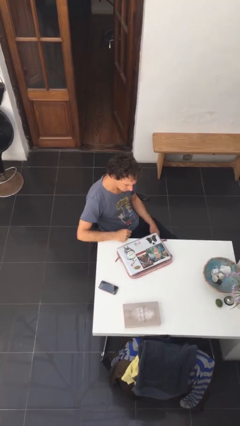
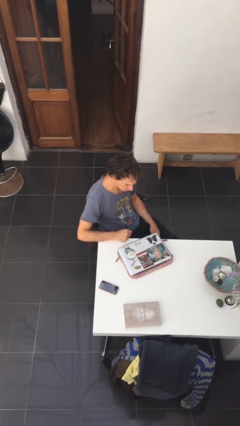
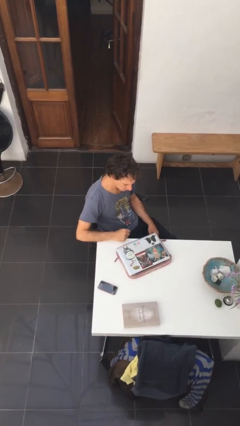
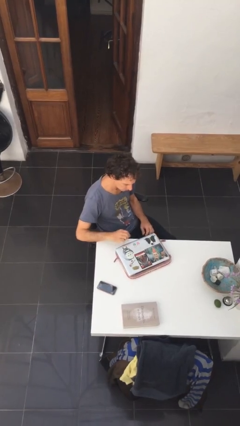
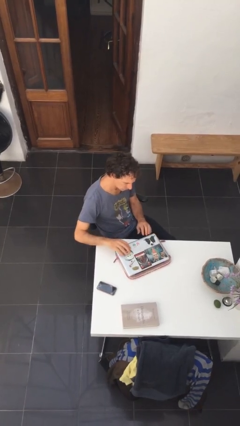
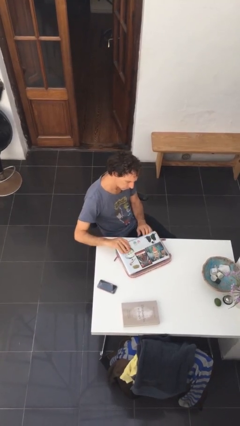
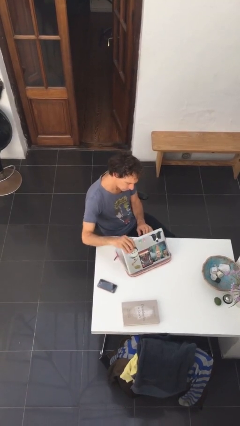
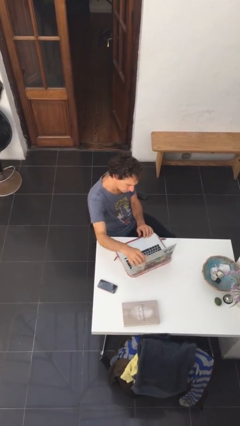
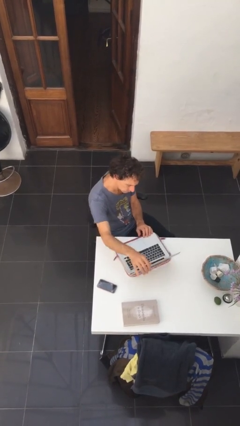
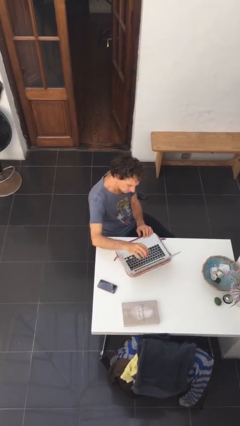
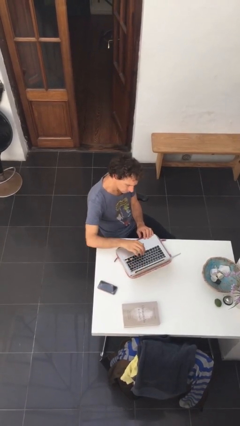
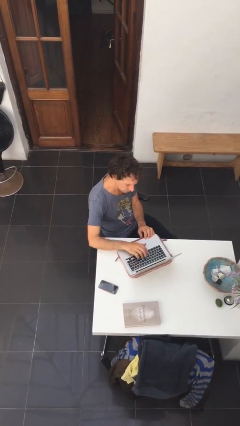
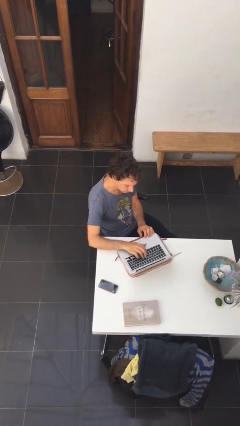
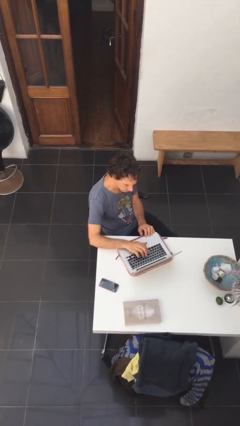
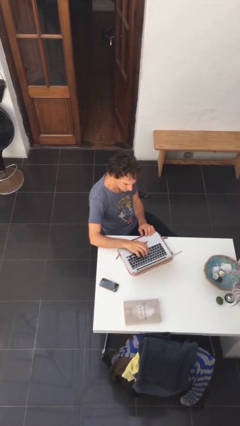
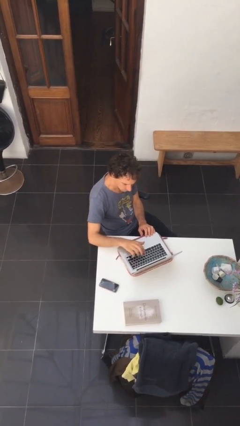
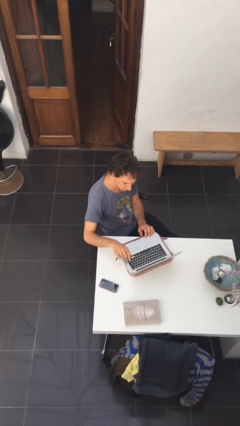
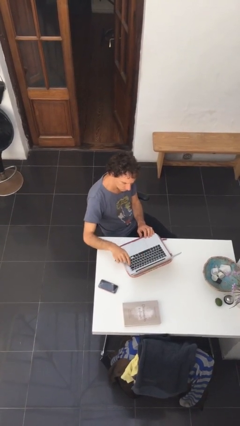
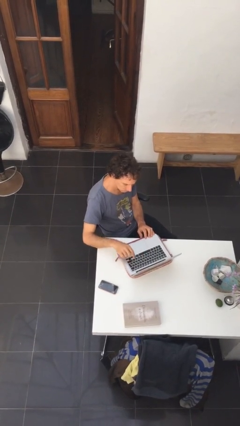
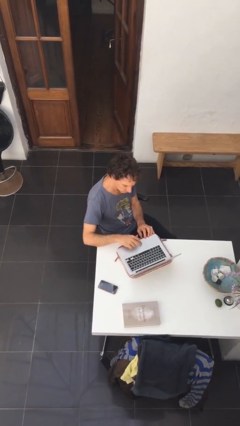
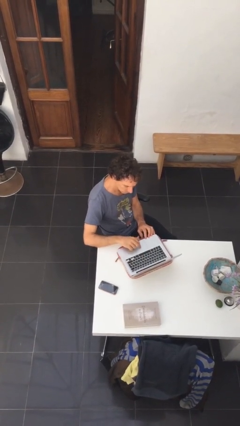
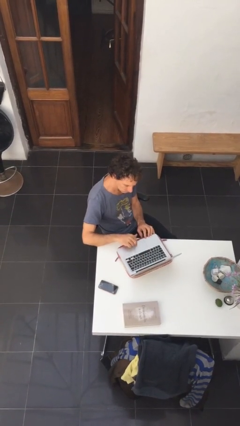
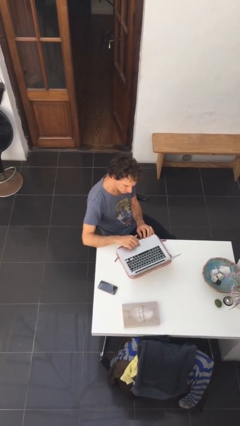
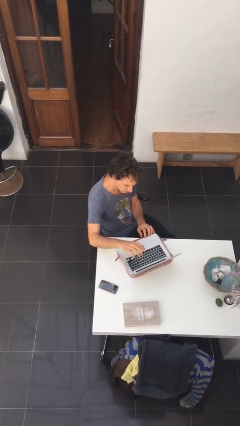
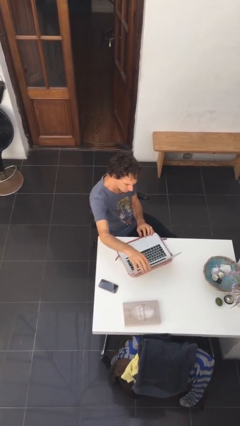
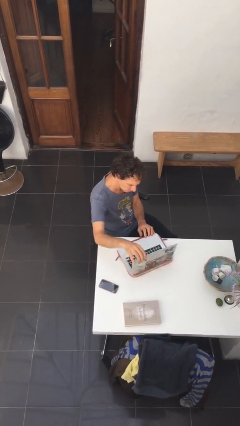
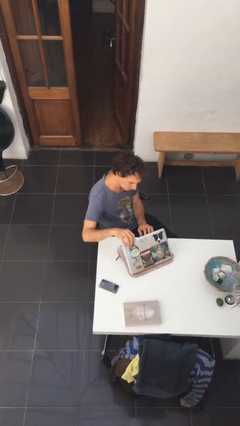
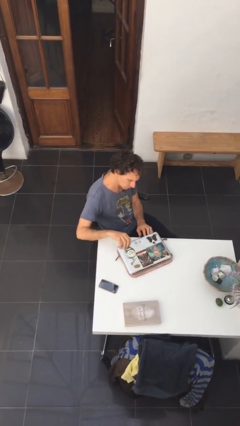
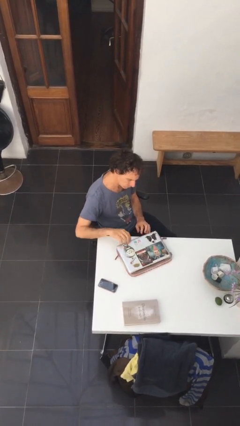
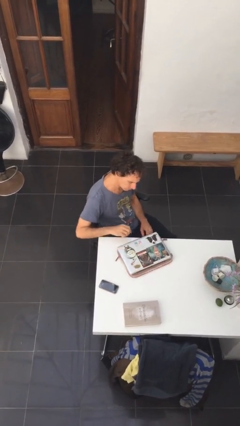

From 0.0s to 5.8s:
person interacts with laptop

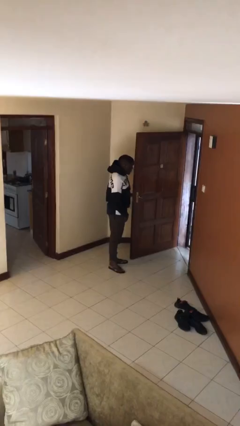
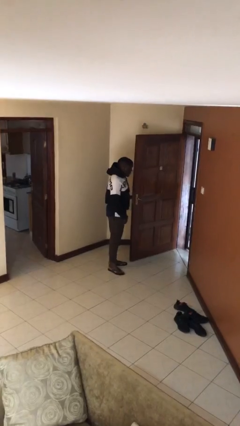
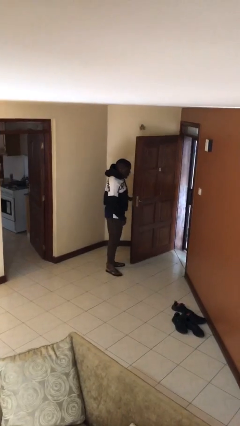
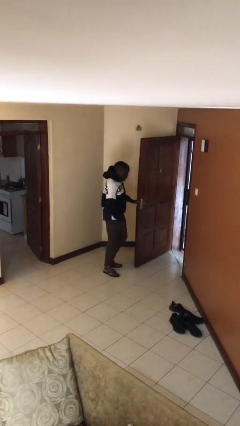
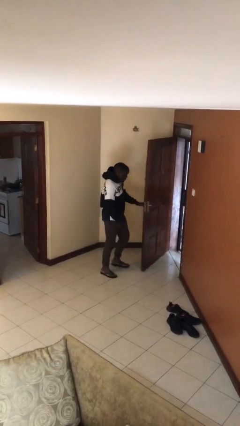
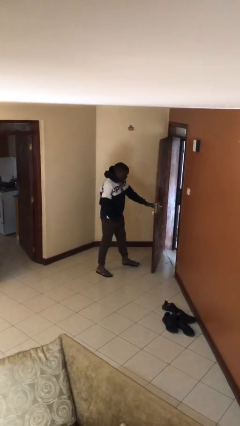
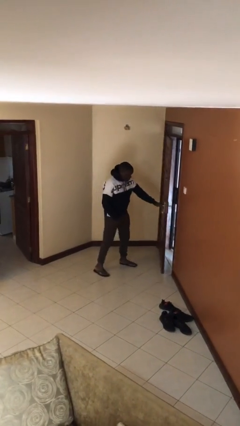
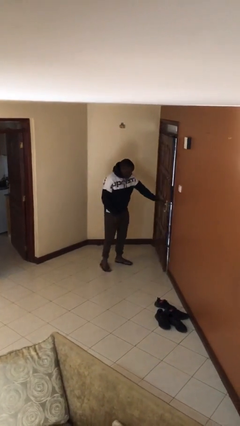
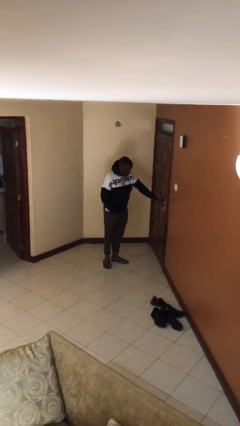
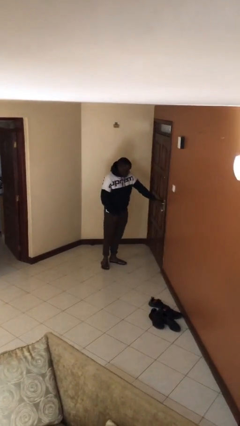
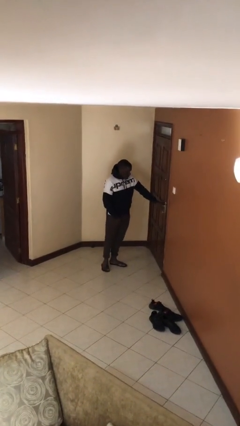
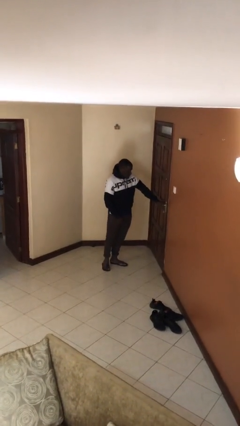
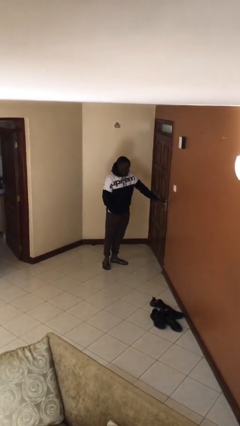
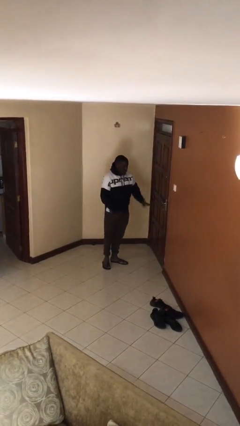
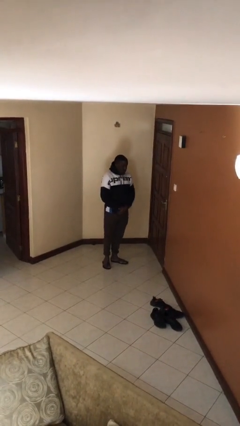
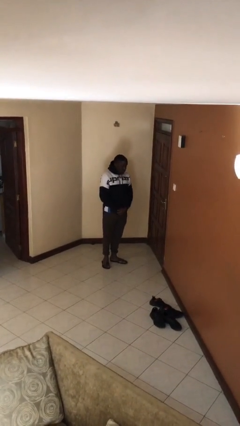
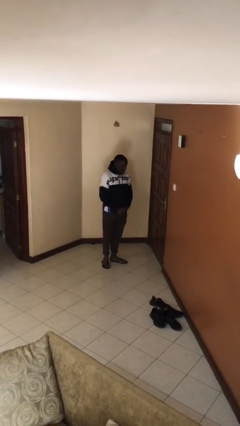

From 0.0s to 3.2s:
person closes facility door

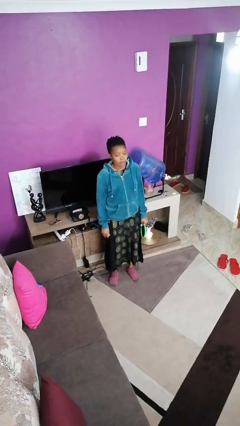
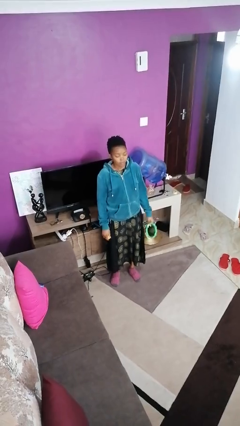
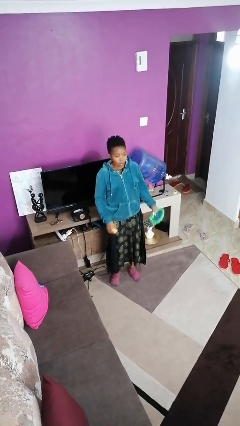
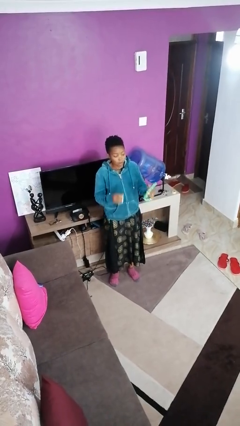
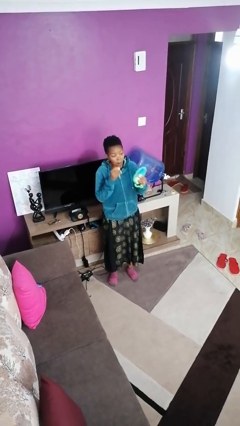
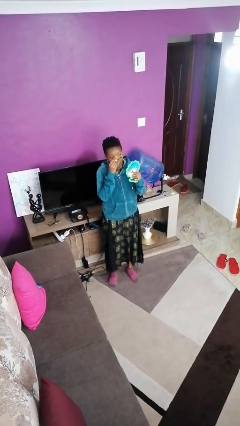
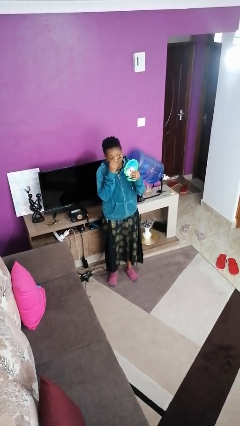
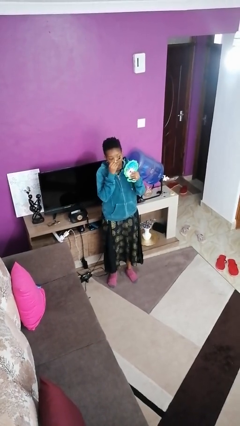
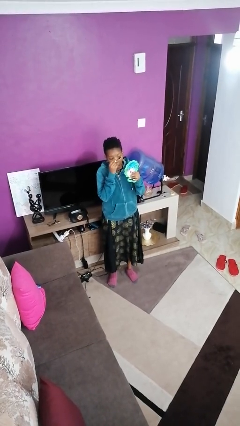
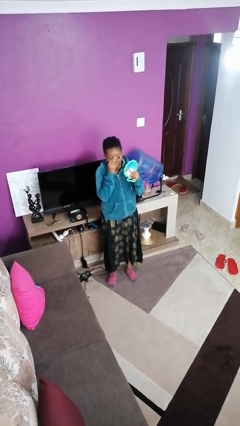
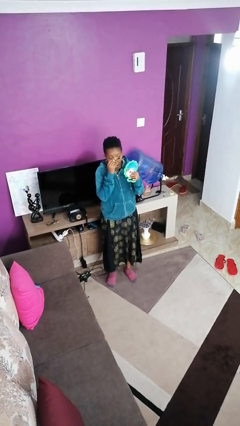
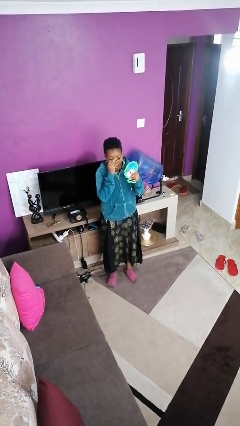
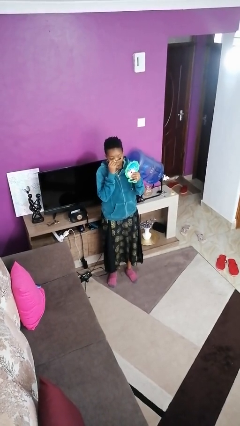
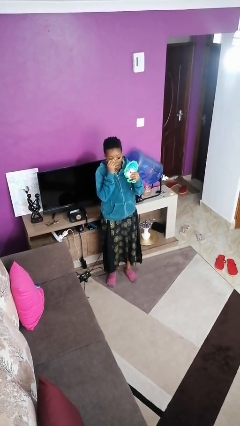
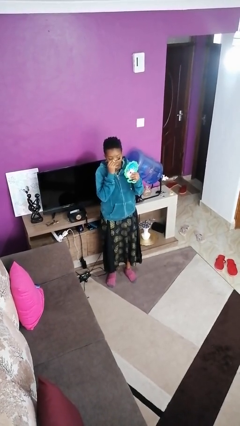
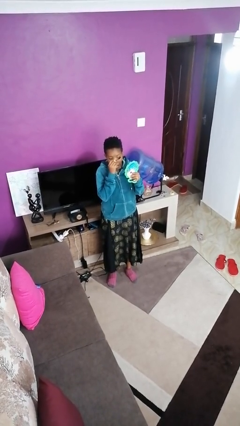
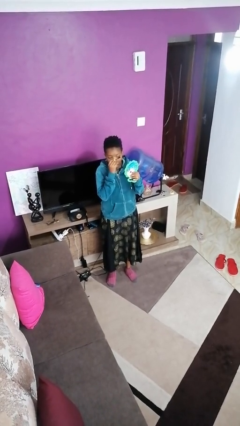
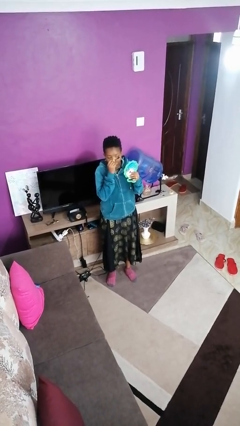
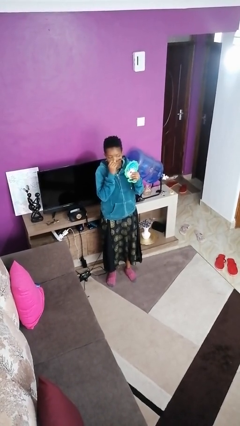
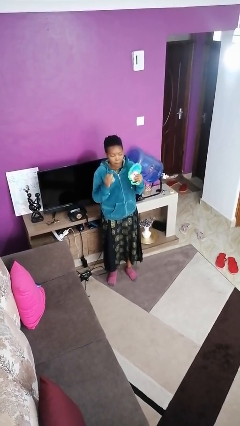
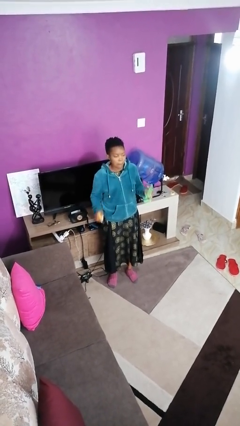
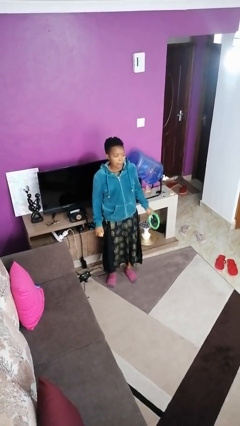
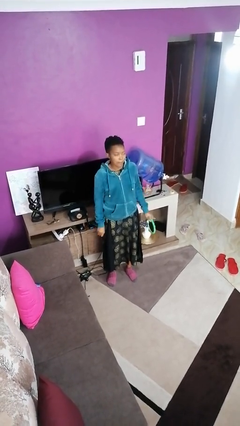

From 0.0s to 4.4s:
person applies eye makeup

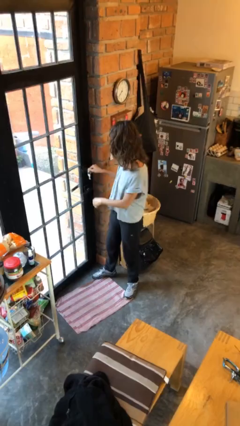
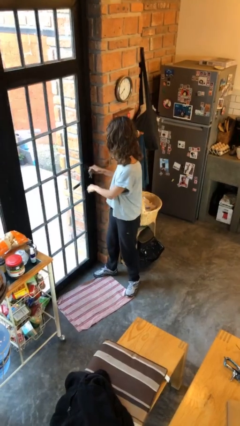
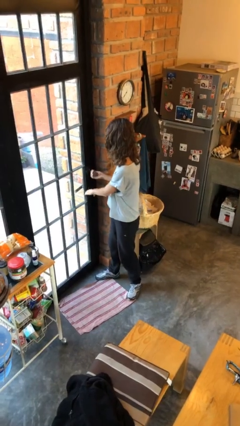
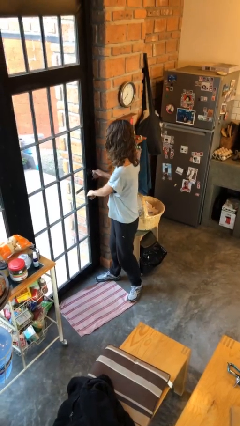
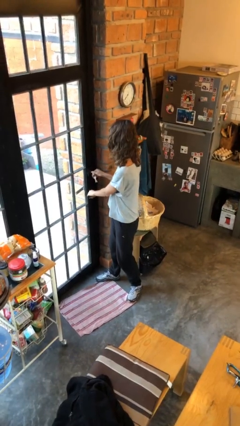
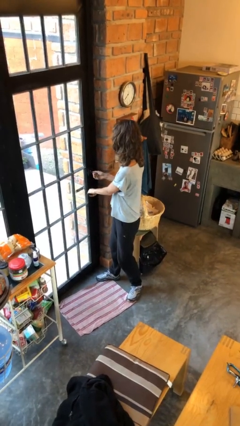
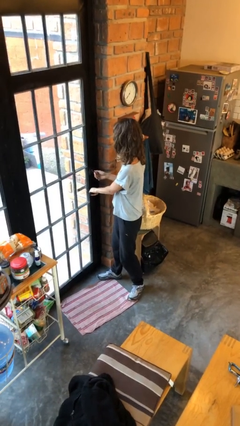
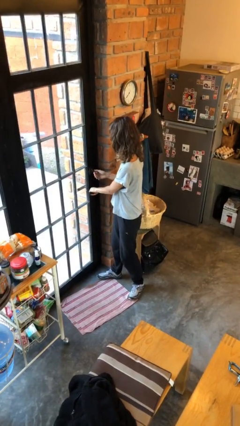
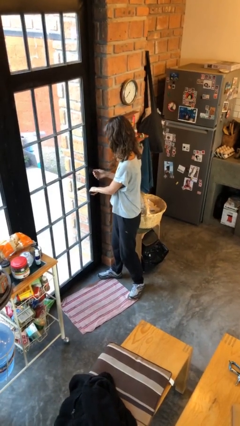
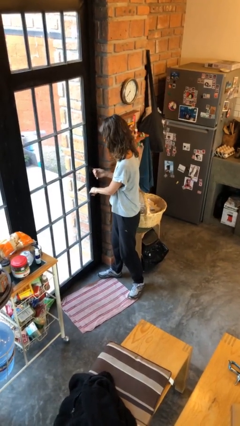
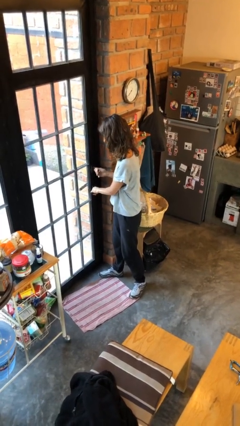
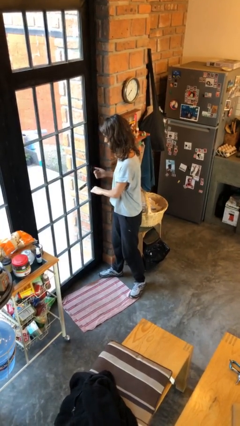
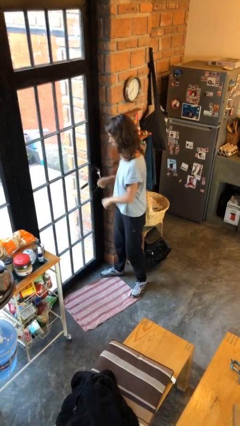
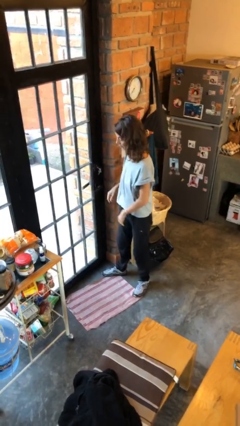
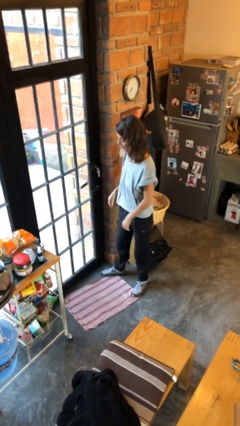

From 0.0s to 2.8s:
person locks door with keys

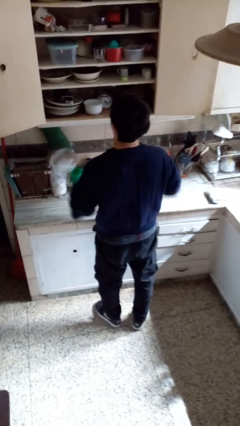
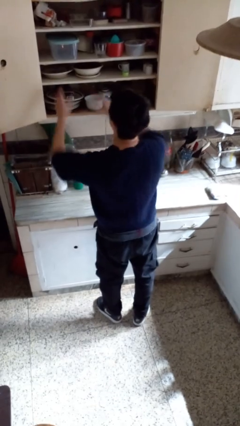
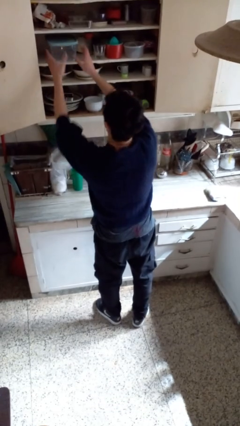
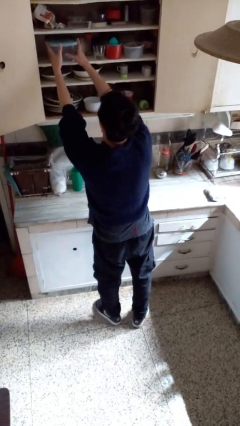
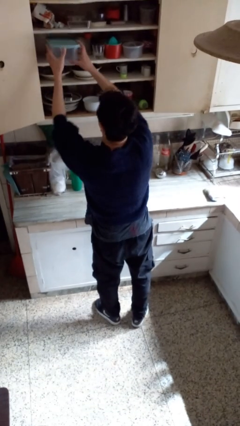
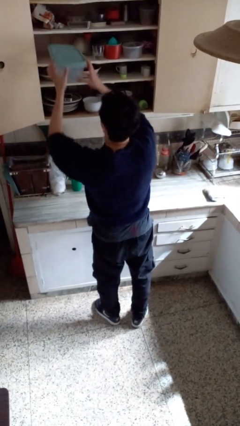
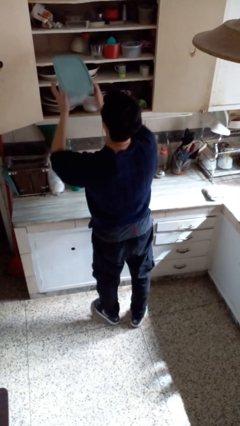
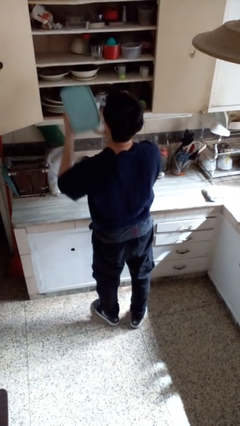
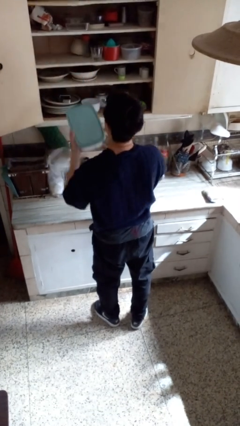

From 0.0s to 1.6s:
person picks up object from cabinet
